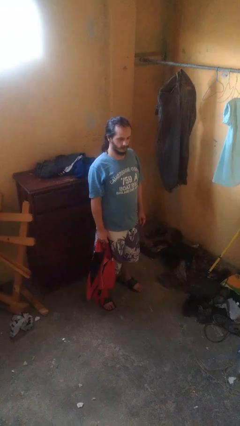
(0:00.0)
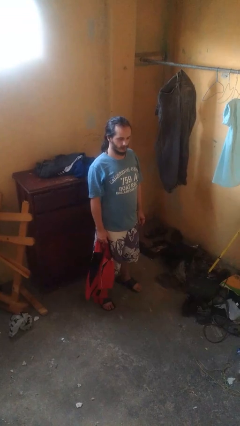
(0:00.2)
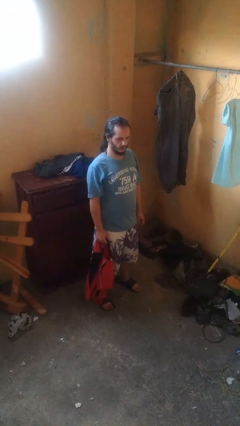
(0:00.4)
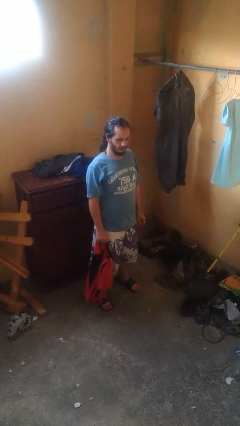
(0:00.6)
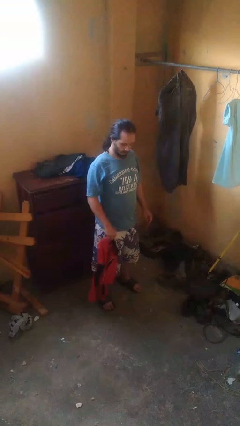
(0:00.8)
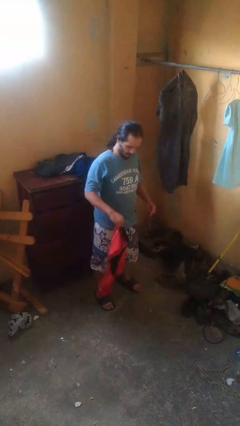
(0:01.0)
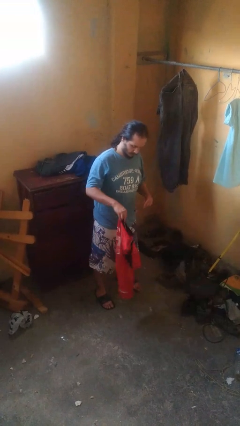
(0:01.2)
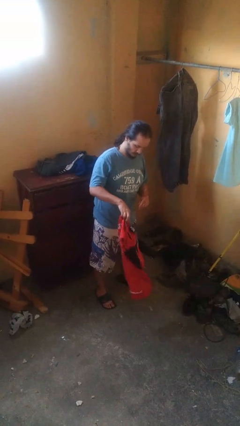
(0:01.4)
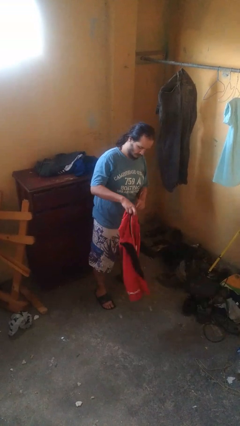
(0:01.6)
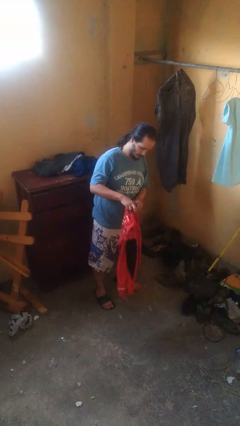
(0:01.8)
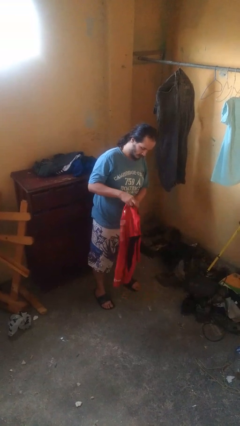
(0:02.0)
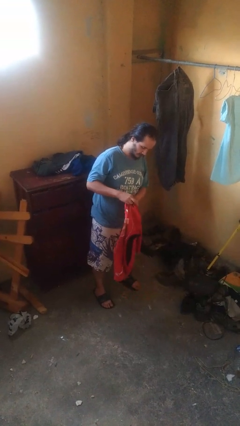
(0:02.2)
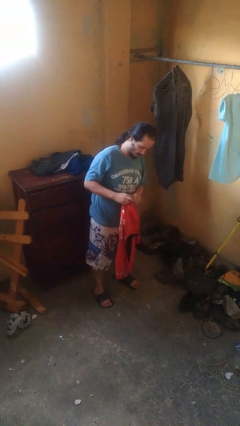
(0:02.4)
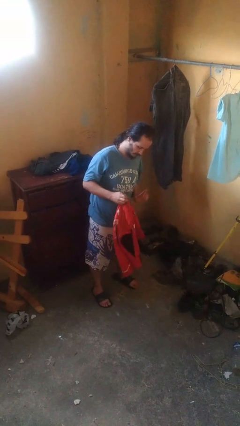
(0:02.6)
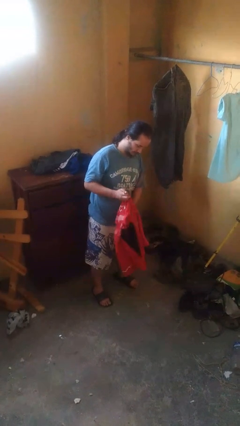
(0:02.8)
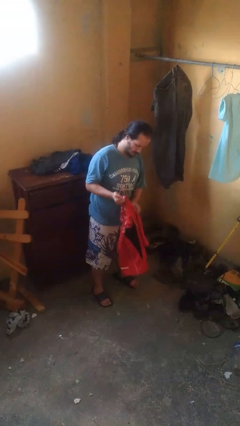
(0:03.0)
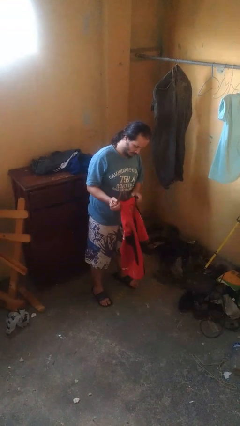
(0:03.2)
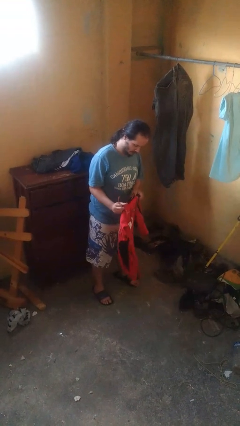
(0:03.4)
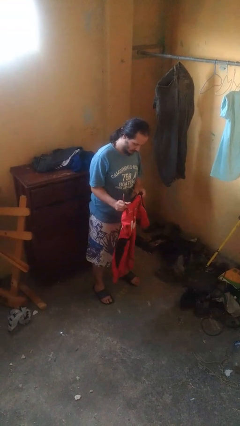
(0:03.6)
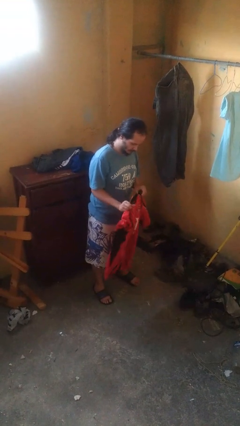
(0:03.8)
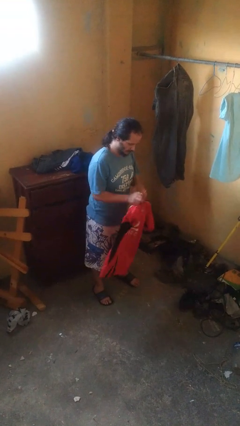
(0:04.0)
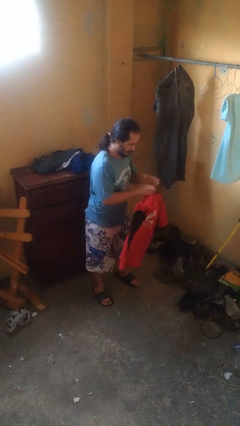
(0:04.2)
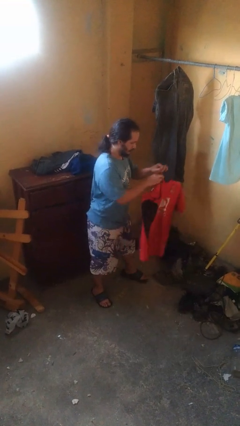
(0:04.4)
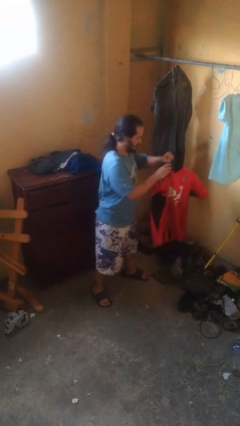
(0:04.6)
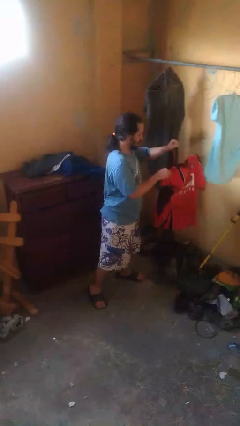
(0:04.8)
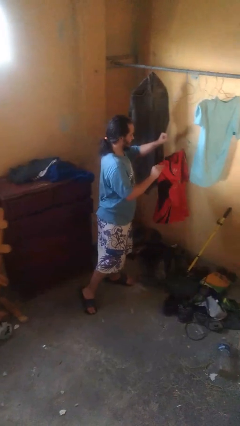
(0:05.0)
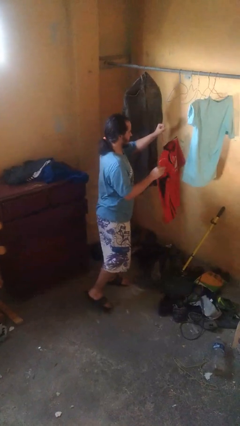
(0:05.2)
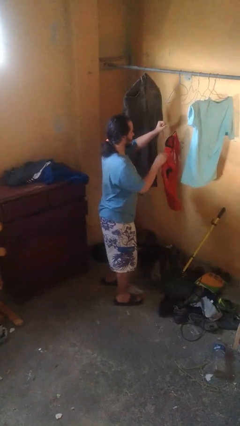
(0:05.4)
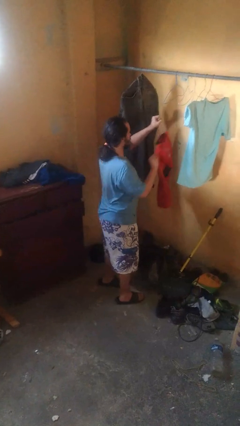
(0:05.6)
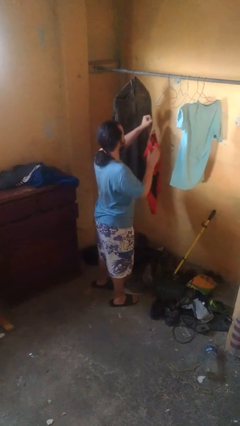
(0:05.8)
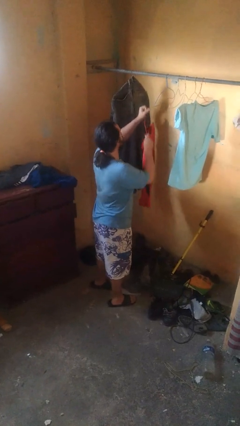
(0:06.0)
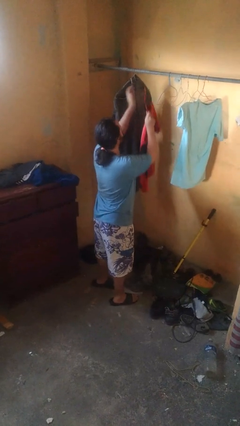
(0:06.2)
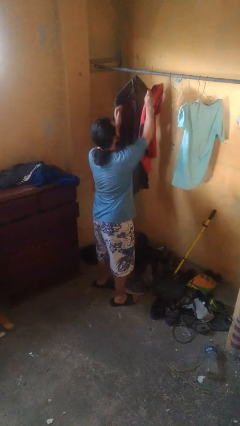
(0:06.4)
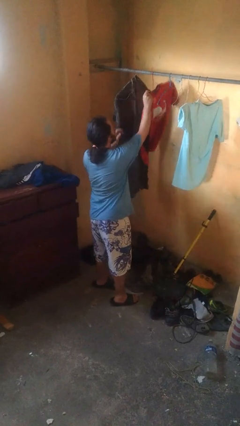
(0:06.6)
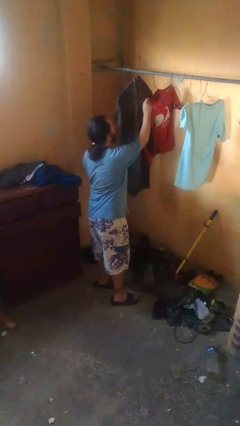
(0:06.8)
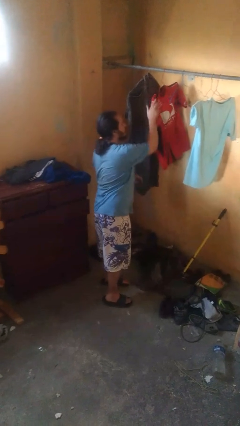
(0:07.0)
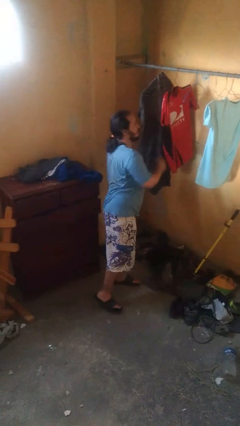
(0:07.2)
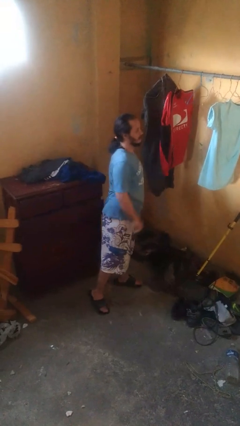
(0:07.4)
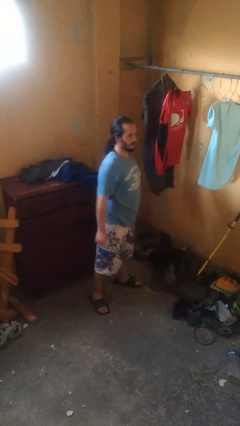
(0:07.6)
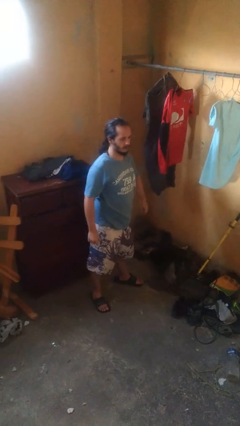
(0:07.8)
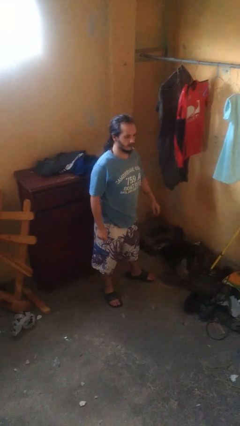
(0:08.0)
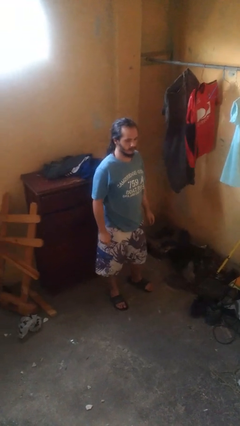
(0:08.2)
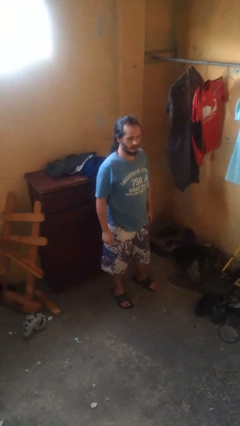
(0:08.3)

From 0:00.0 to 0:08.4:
person puts clothes into closet

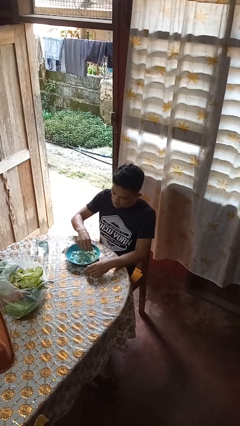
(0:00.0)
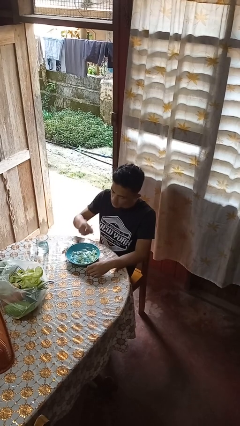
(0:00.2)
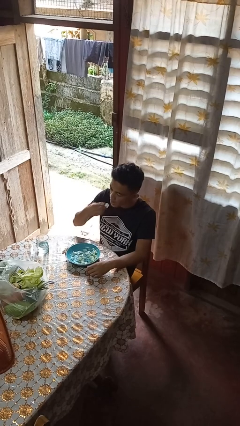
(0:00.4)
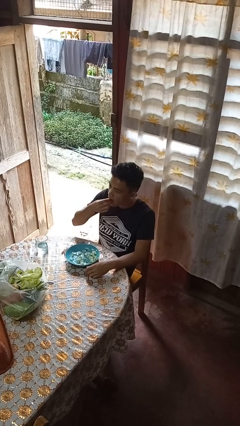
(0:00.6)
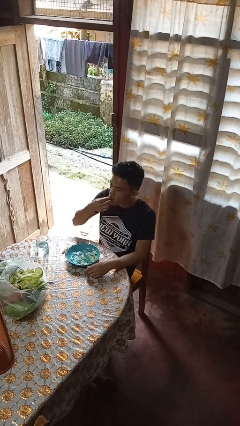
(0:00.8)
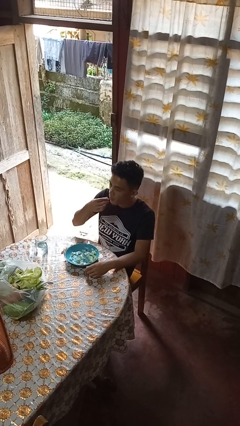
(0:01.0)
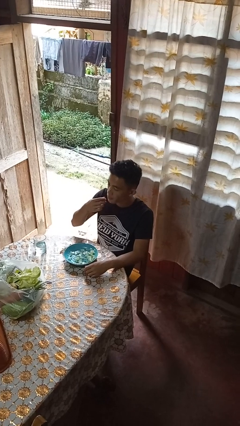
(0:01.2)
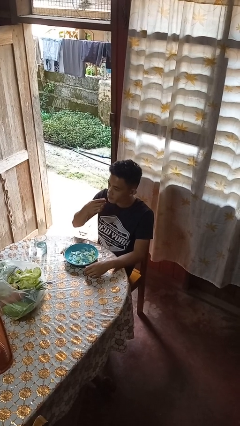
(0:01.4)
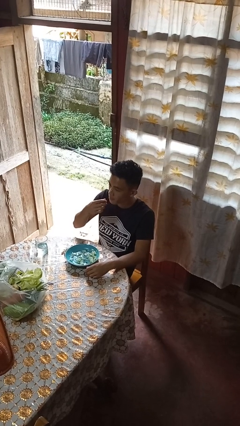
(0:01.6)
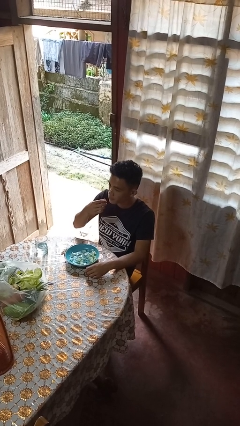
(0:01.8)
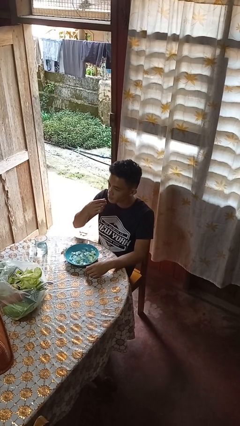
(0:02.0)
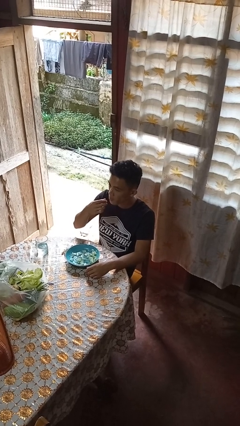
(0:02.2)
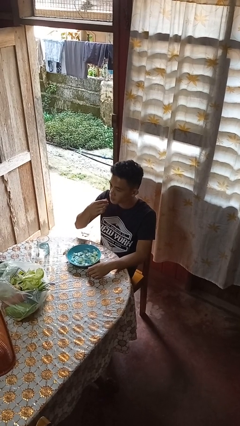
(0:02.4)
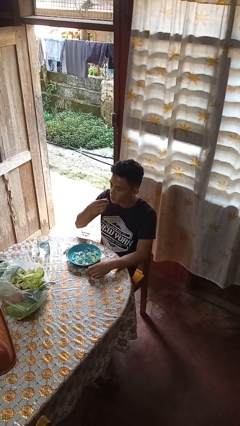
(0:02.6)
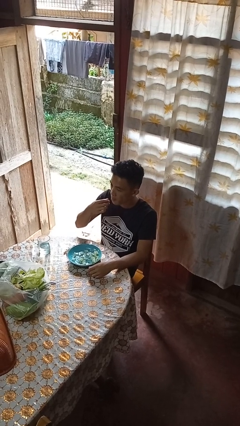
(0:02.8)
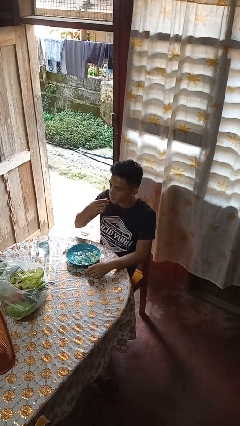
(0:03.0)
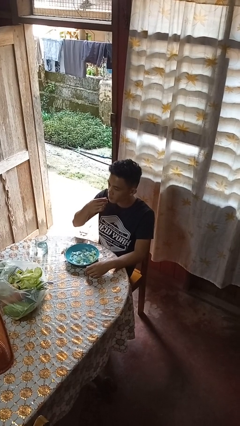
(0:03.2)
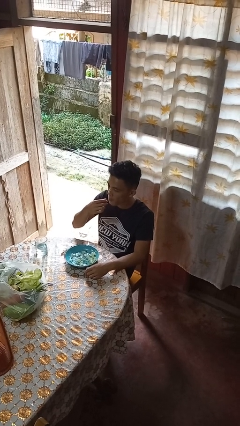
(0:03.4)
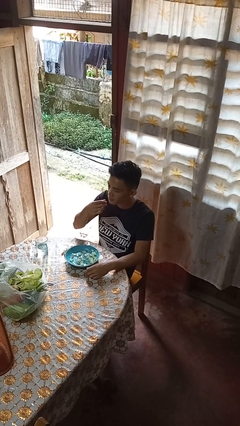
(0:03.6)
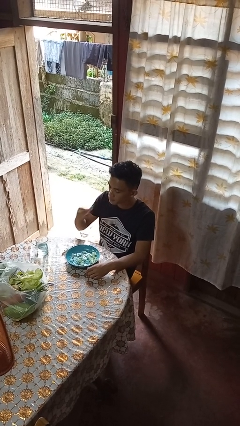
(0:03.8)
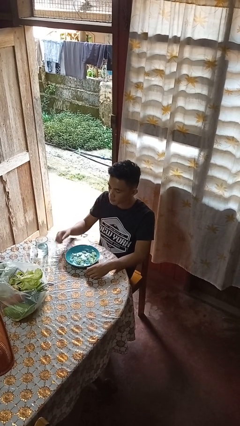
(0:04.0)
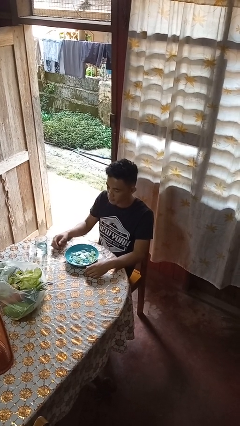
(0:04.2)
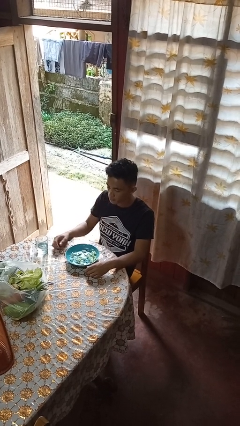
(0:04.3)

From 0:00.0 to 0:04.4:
person eats with hands

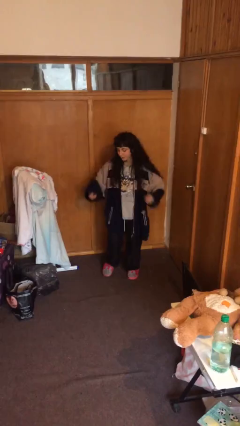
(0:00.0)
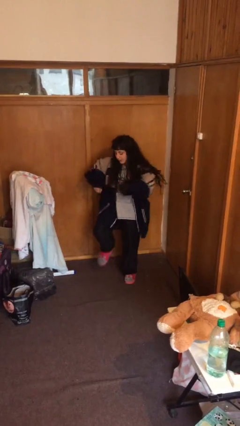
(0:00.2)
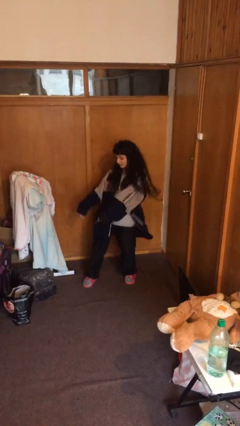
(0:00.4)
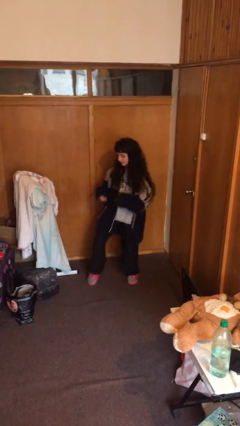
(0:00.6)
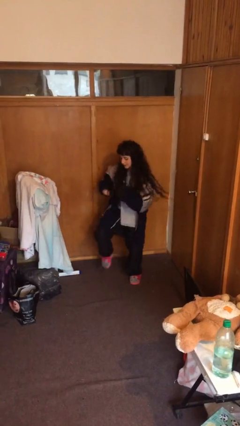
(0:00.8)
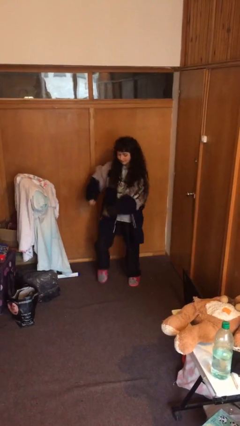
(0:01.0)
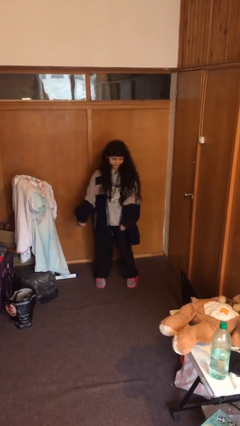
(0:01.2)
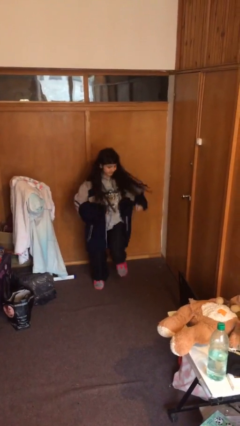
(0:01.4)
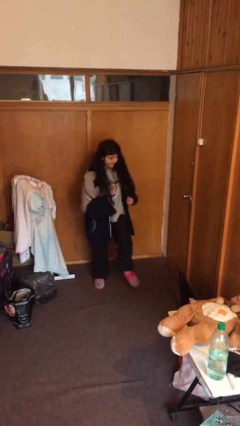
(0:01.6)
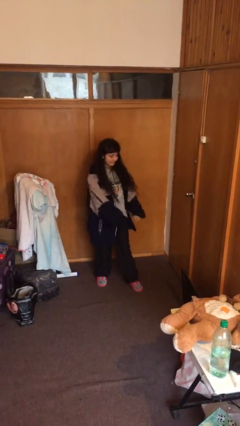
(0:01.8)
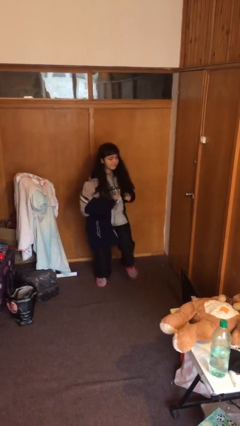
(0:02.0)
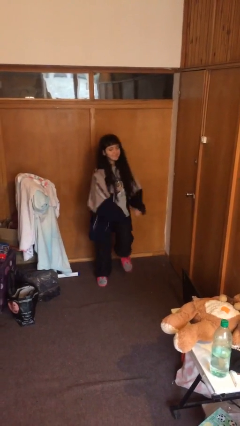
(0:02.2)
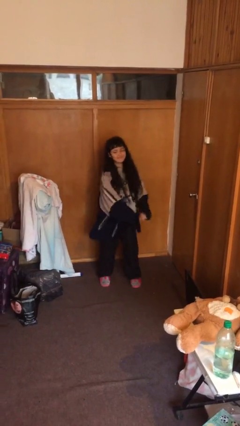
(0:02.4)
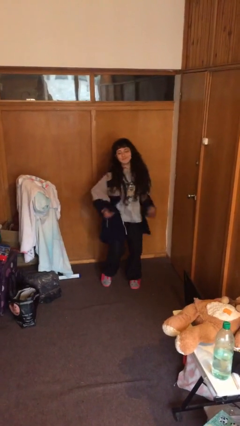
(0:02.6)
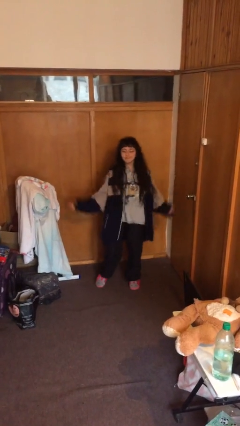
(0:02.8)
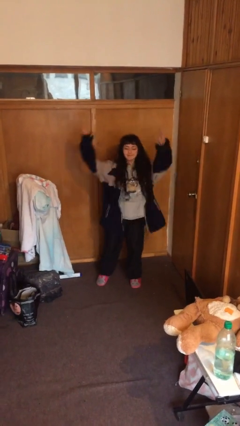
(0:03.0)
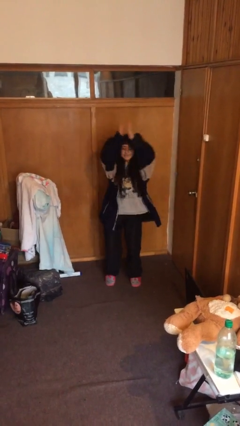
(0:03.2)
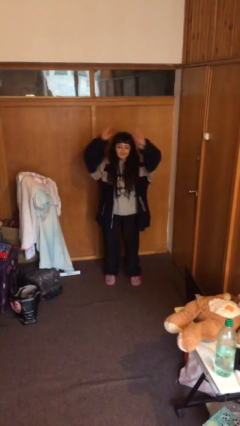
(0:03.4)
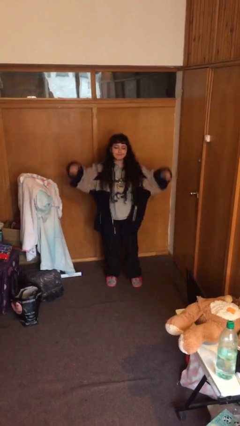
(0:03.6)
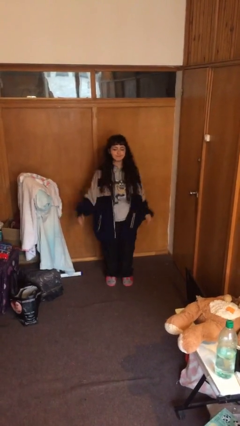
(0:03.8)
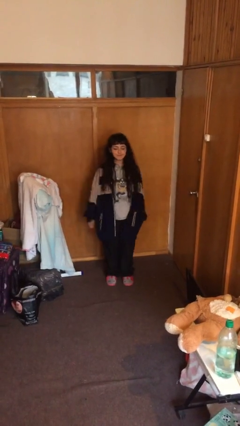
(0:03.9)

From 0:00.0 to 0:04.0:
person dances in place

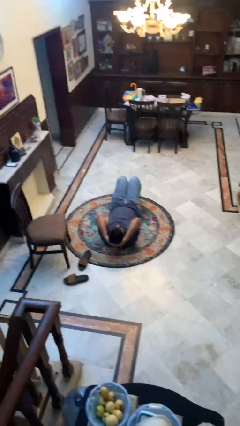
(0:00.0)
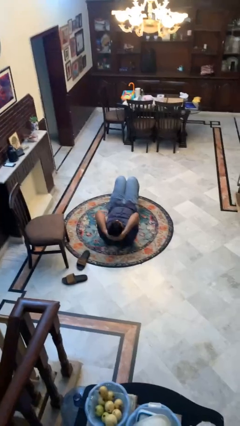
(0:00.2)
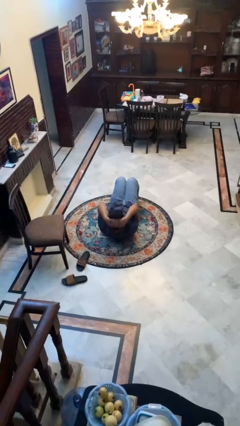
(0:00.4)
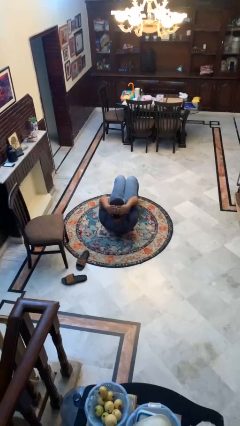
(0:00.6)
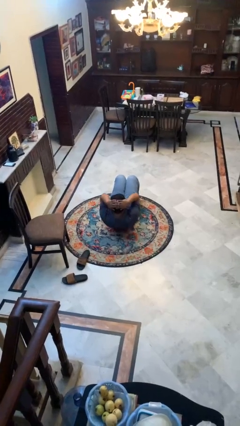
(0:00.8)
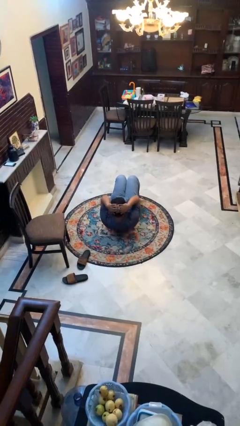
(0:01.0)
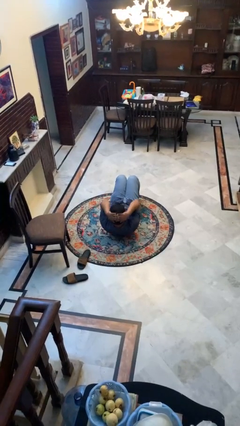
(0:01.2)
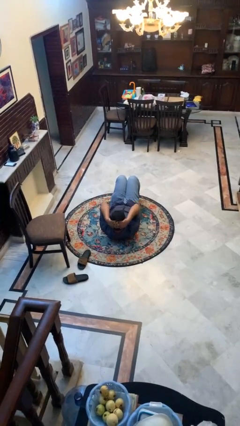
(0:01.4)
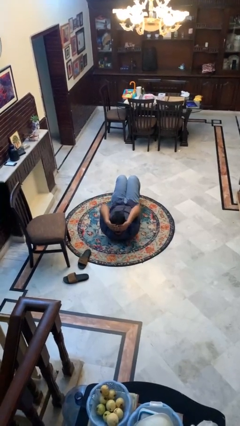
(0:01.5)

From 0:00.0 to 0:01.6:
person exercises with situp
